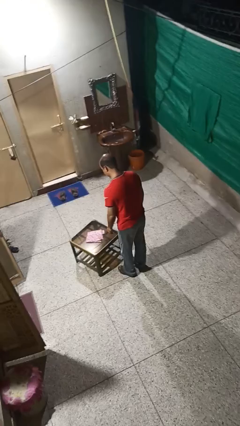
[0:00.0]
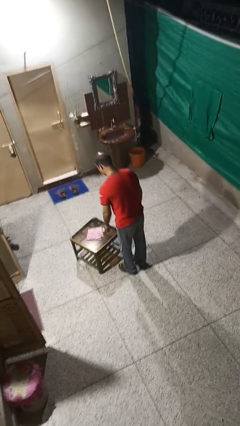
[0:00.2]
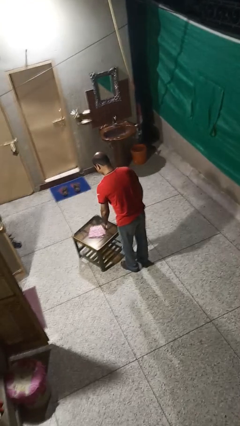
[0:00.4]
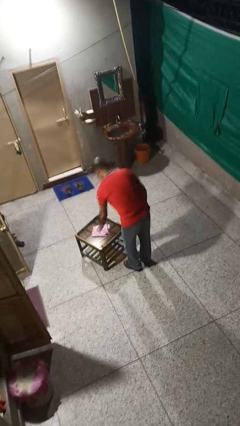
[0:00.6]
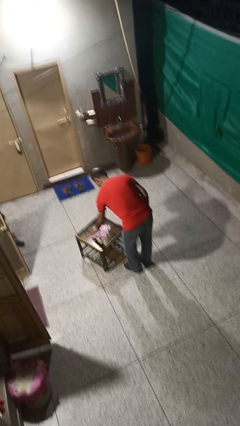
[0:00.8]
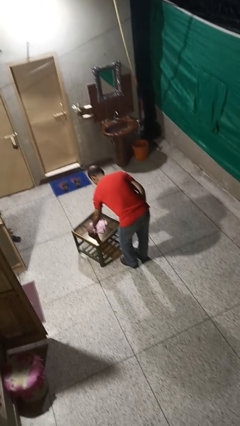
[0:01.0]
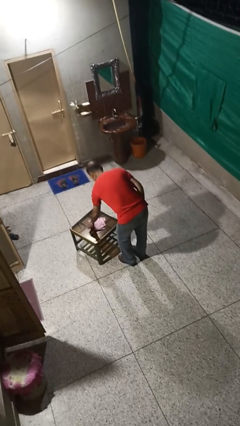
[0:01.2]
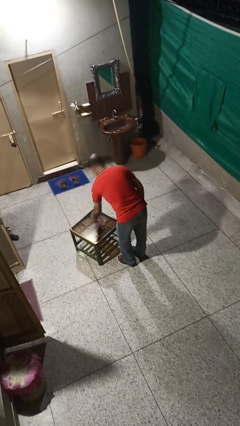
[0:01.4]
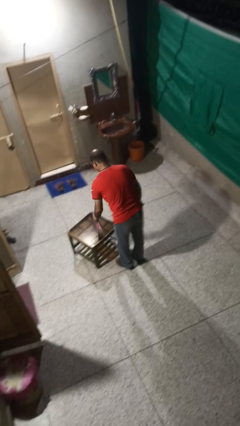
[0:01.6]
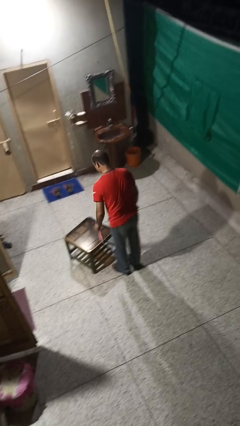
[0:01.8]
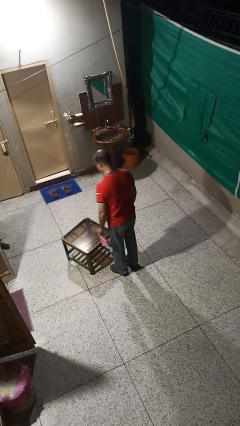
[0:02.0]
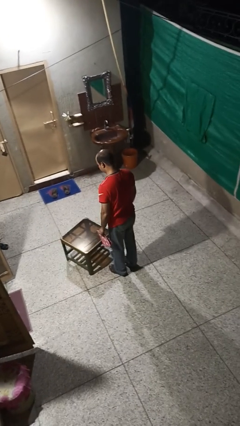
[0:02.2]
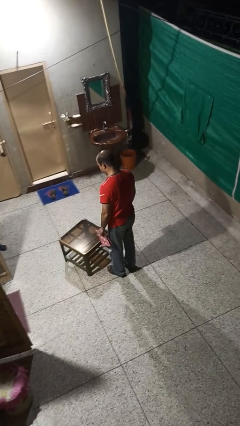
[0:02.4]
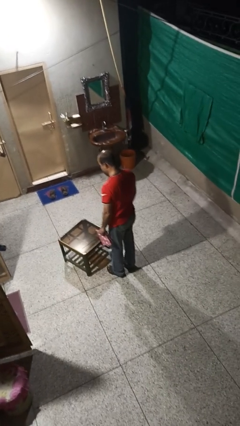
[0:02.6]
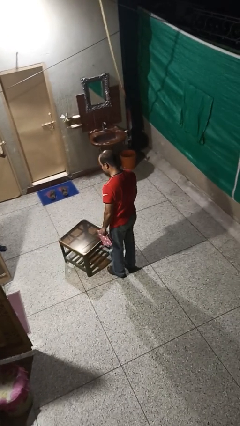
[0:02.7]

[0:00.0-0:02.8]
person picks up object from table

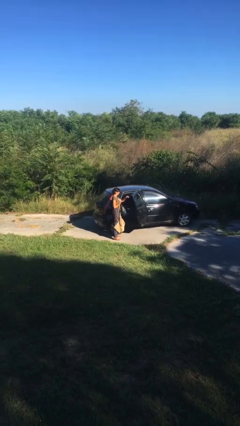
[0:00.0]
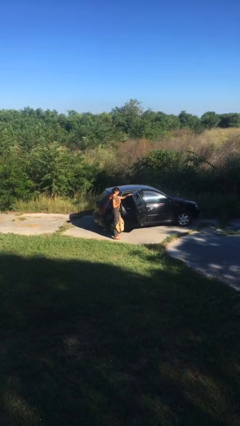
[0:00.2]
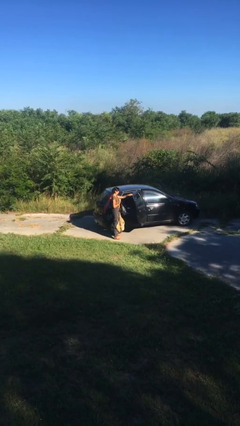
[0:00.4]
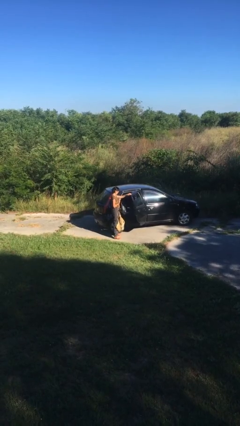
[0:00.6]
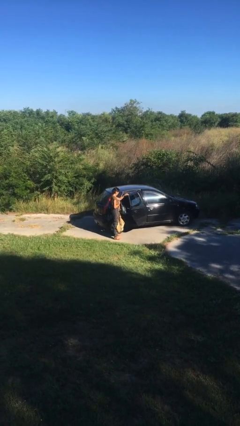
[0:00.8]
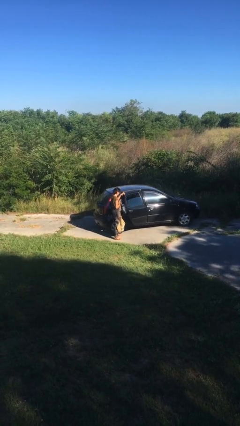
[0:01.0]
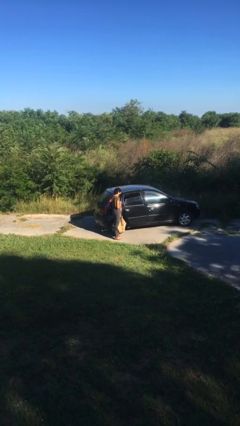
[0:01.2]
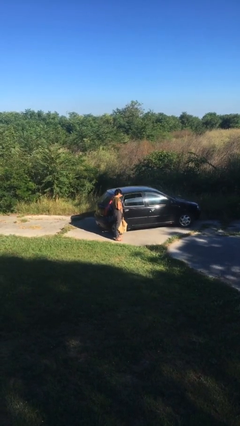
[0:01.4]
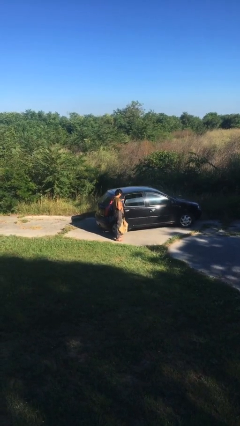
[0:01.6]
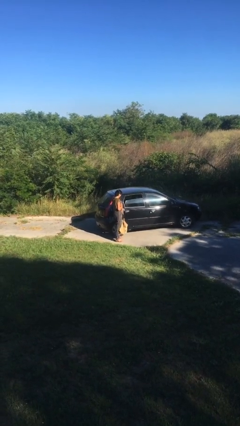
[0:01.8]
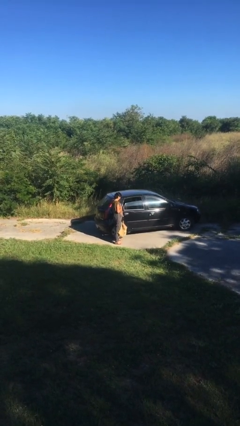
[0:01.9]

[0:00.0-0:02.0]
person closes car door

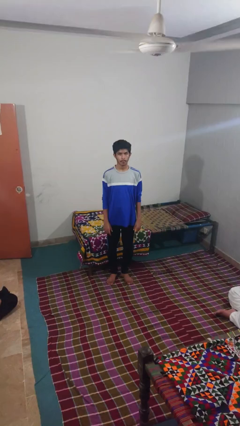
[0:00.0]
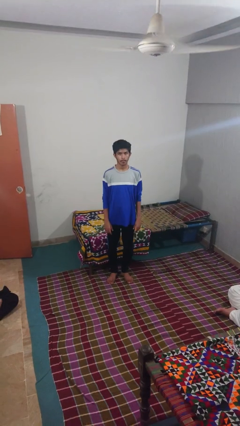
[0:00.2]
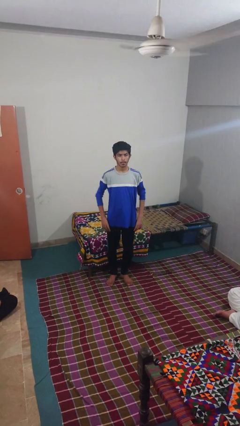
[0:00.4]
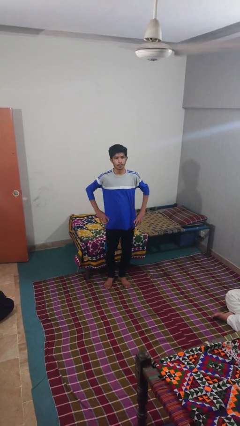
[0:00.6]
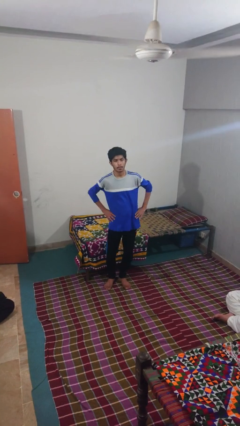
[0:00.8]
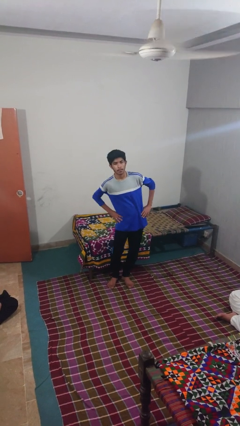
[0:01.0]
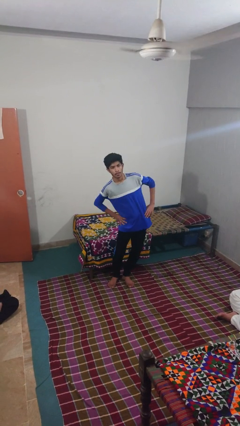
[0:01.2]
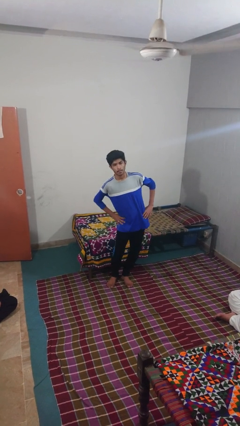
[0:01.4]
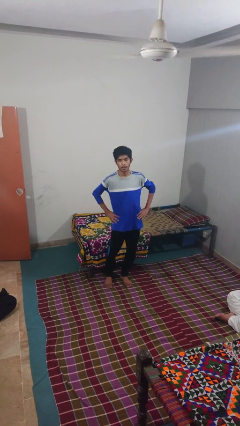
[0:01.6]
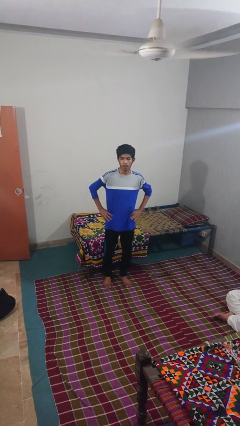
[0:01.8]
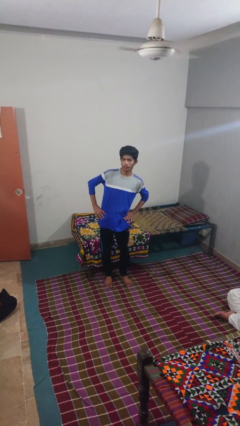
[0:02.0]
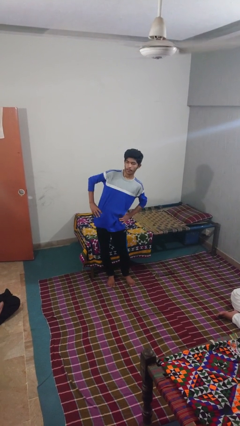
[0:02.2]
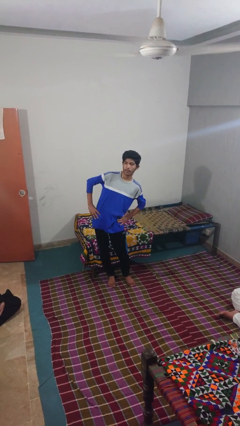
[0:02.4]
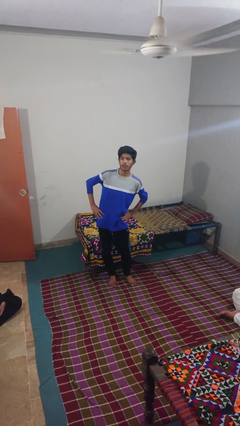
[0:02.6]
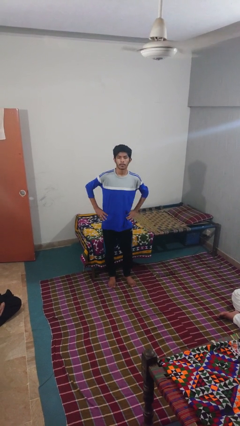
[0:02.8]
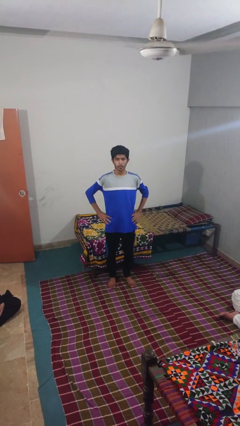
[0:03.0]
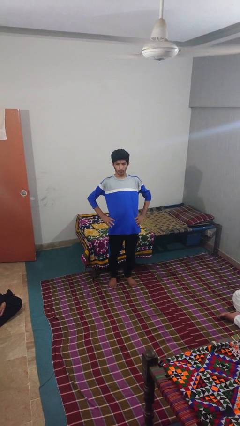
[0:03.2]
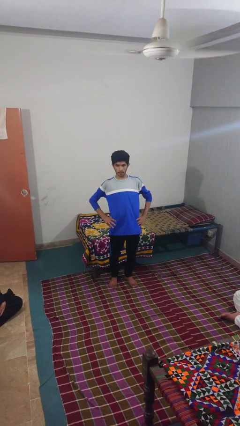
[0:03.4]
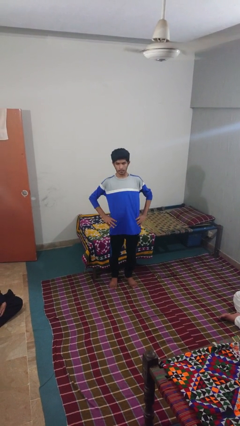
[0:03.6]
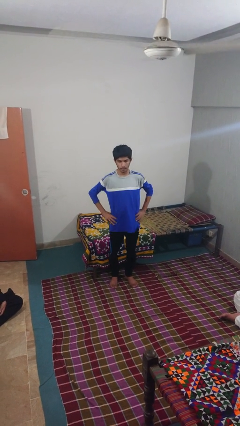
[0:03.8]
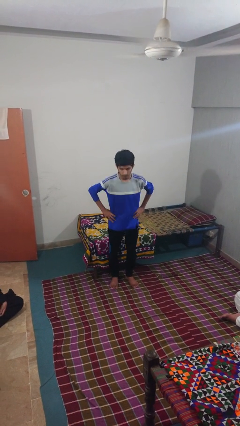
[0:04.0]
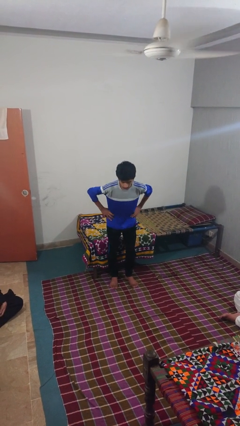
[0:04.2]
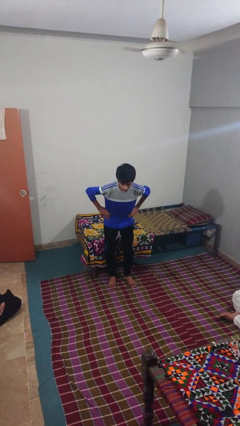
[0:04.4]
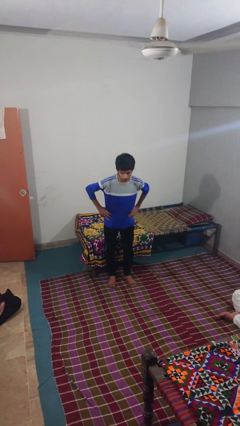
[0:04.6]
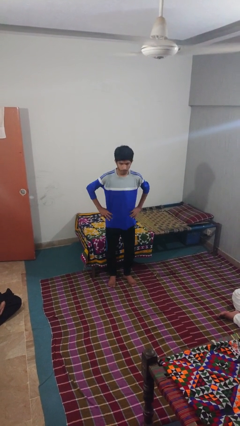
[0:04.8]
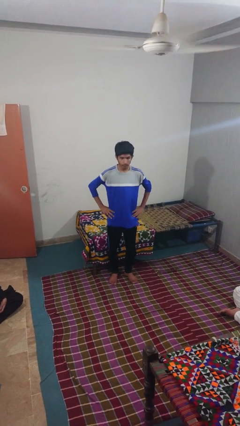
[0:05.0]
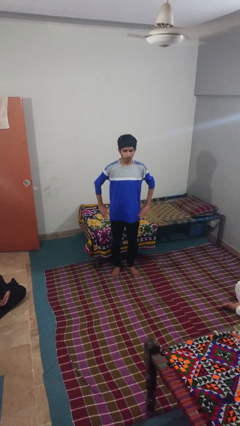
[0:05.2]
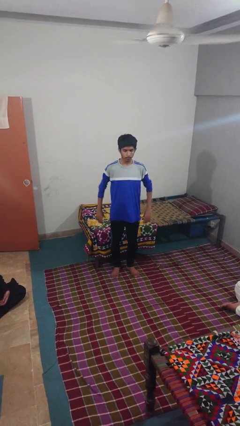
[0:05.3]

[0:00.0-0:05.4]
person wiggles hips

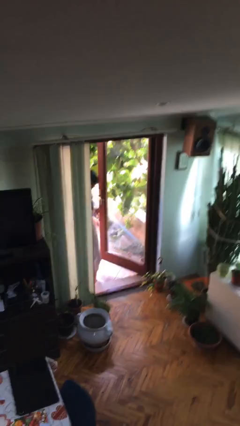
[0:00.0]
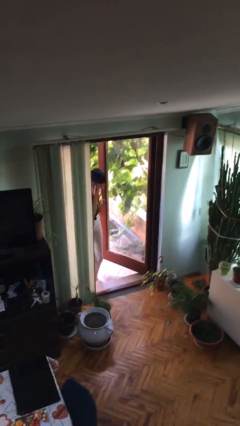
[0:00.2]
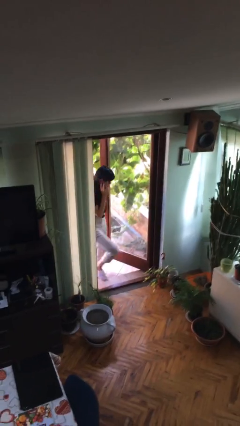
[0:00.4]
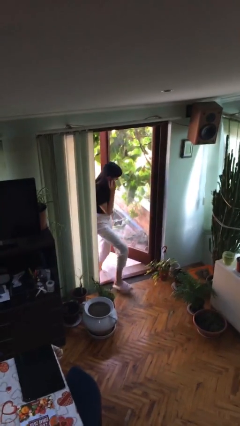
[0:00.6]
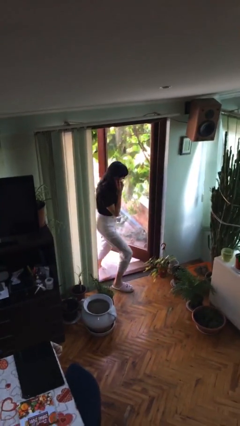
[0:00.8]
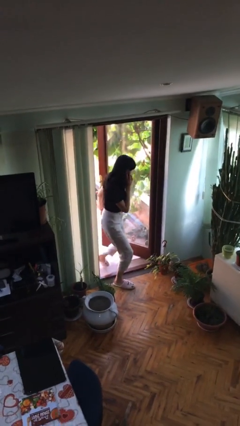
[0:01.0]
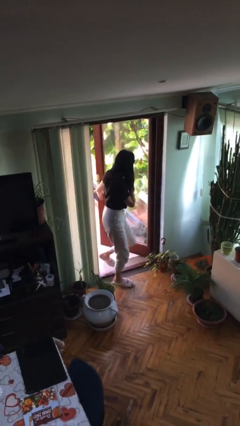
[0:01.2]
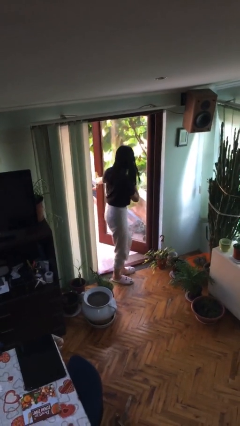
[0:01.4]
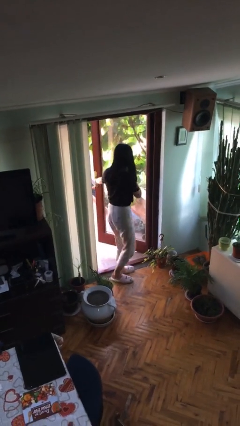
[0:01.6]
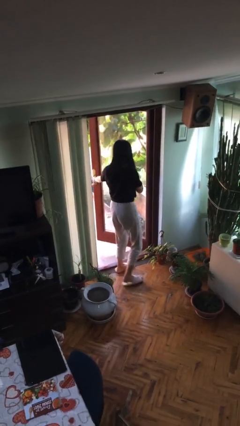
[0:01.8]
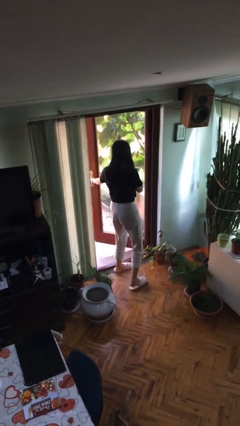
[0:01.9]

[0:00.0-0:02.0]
person enters scene through structure

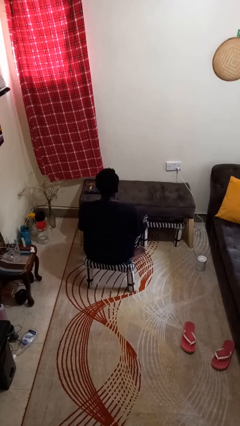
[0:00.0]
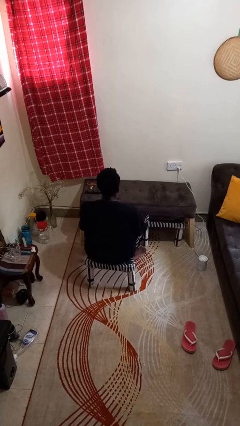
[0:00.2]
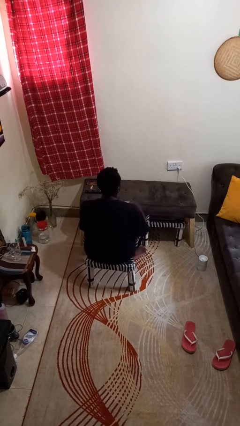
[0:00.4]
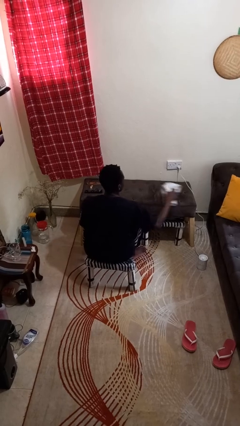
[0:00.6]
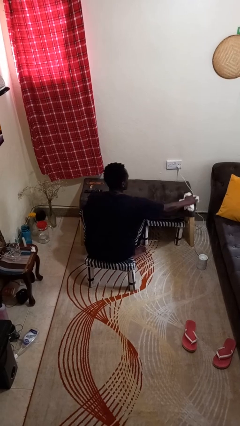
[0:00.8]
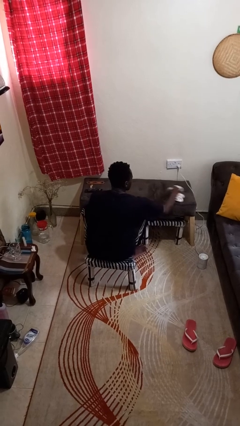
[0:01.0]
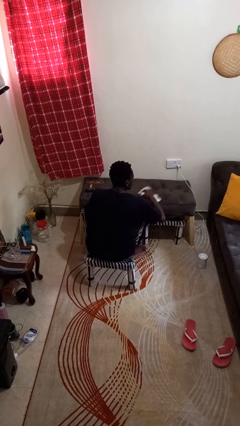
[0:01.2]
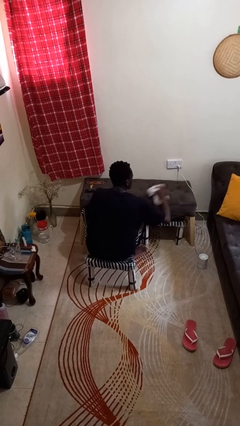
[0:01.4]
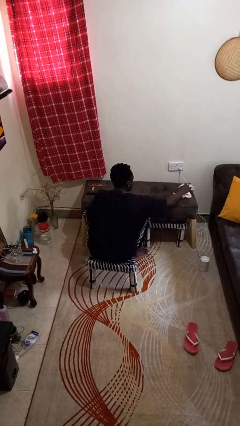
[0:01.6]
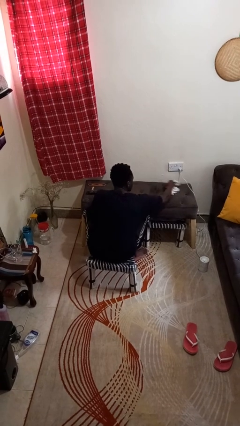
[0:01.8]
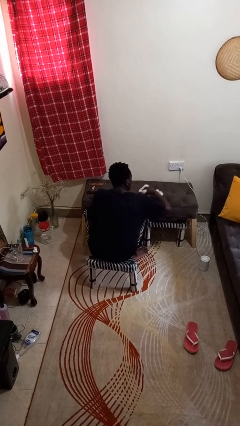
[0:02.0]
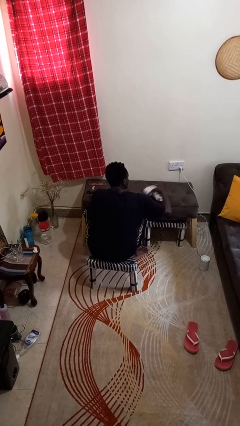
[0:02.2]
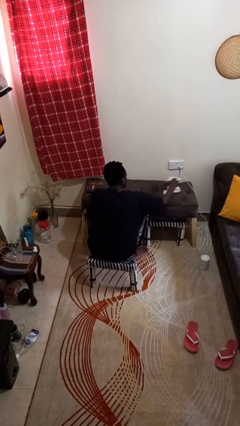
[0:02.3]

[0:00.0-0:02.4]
person cleans table with rag

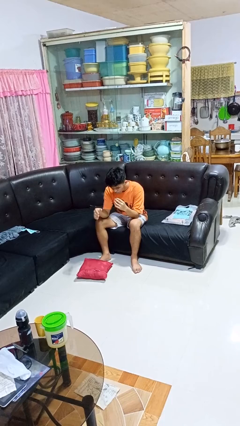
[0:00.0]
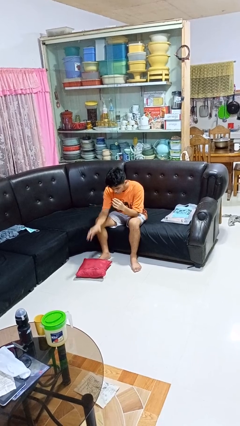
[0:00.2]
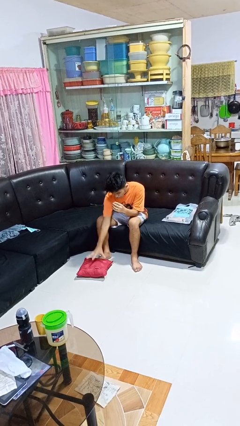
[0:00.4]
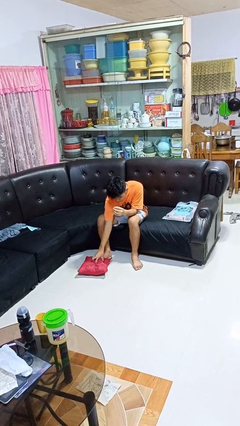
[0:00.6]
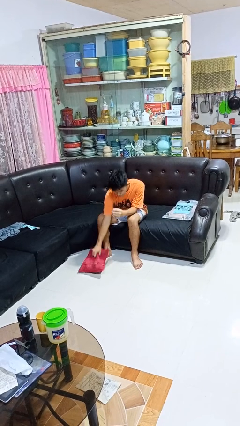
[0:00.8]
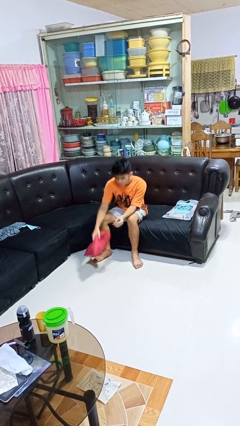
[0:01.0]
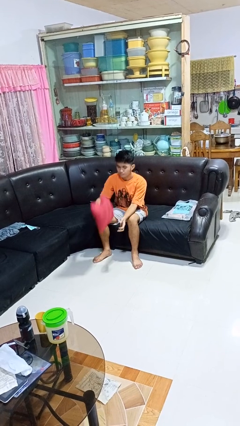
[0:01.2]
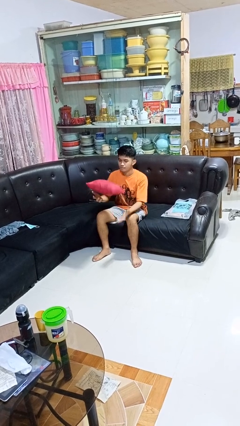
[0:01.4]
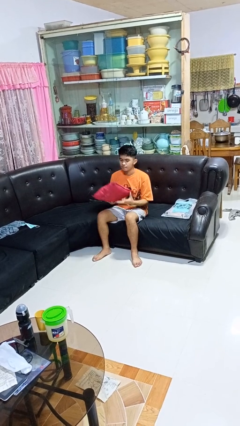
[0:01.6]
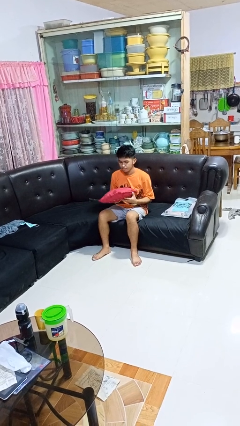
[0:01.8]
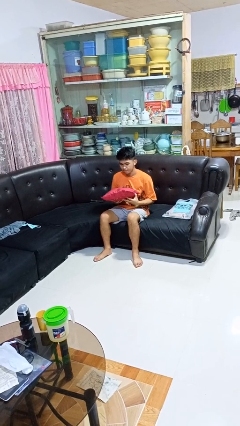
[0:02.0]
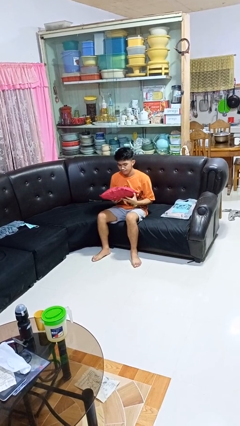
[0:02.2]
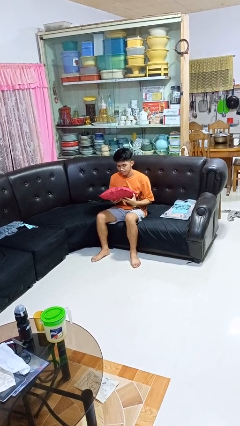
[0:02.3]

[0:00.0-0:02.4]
person picks up object from floor

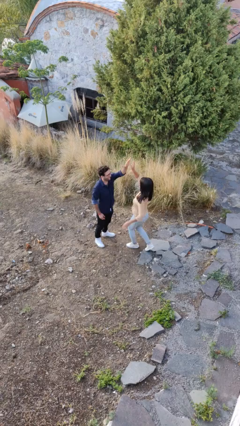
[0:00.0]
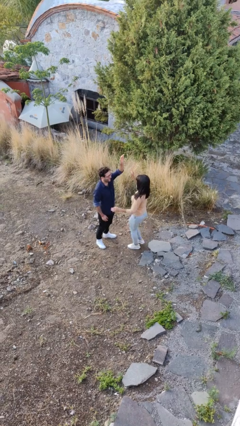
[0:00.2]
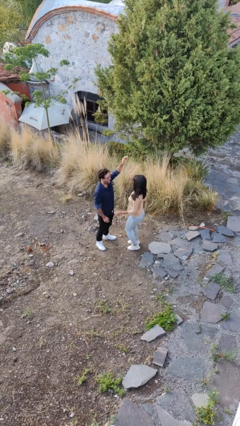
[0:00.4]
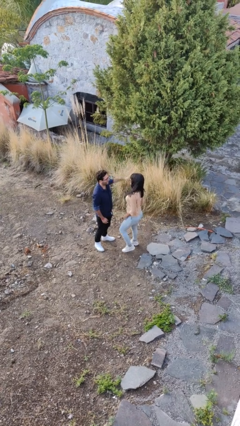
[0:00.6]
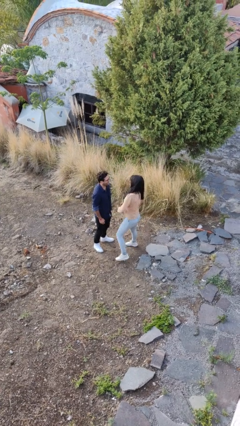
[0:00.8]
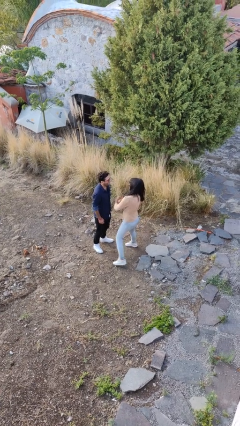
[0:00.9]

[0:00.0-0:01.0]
person highfives hand
